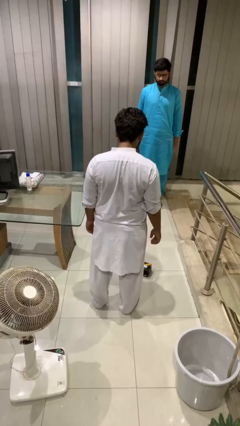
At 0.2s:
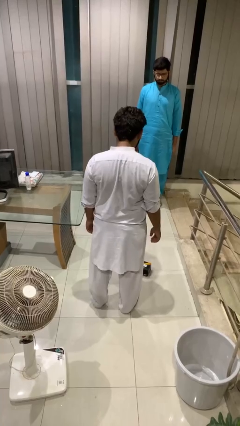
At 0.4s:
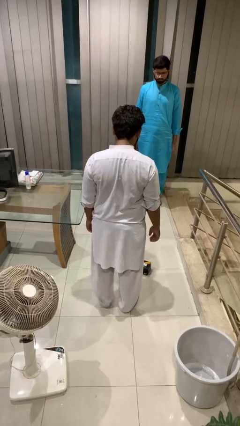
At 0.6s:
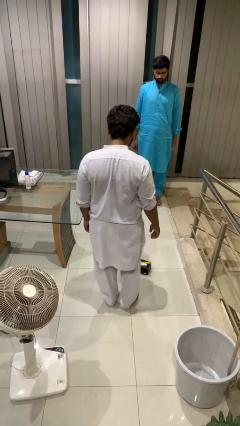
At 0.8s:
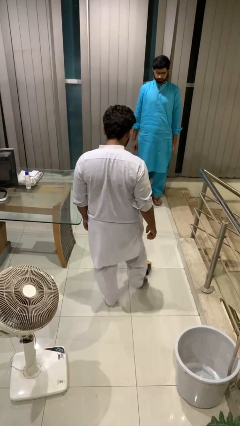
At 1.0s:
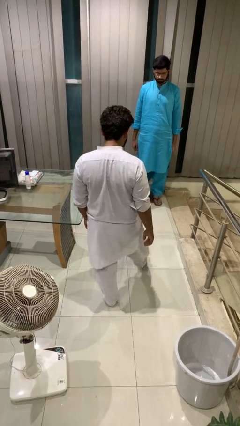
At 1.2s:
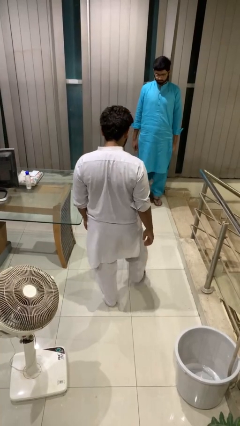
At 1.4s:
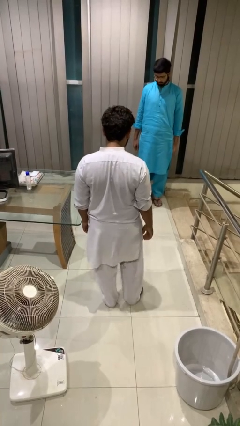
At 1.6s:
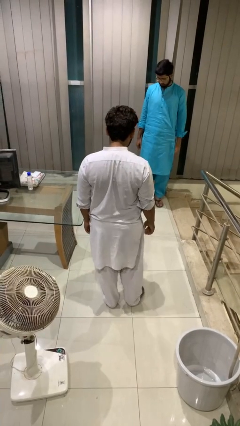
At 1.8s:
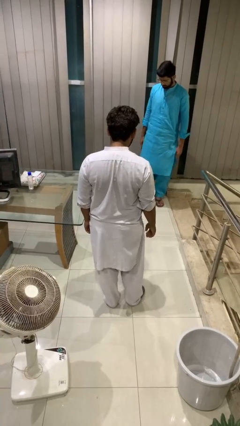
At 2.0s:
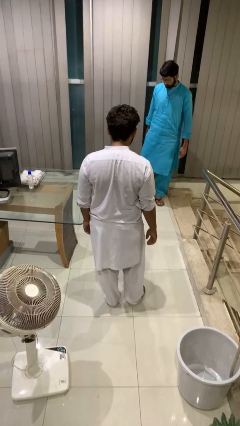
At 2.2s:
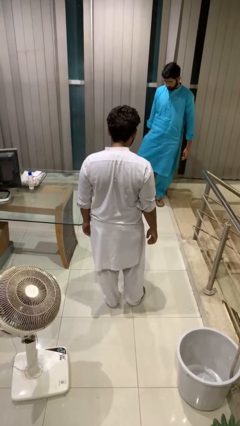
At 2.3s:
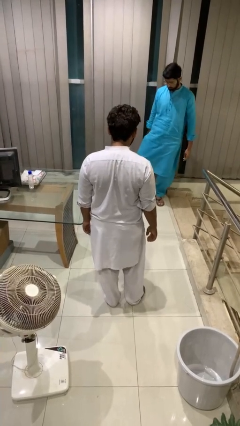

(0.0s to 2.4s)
person kicks object to person

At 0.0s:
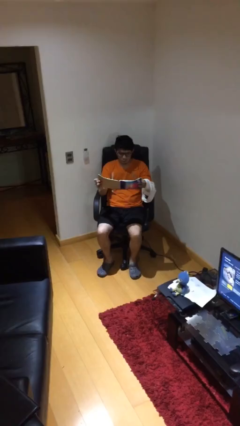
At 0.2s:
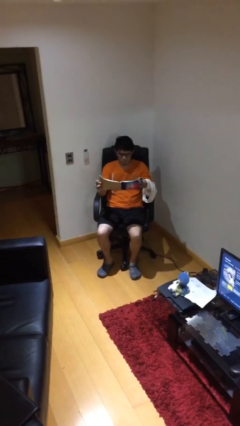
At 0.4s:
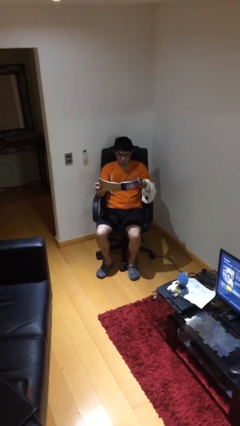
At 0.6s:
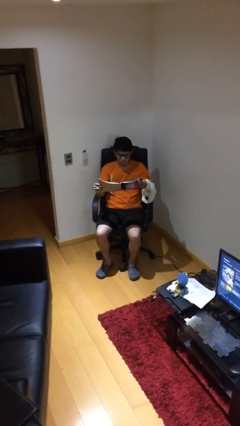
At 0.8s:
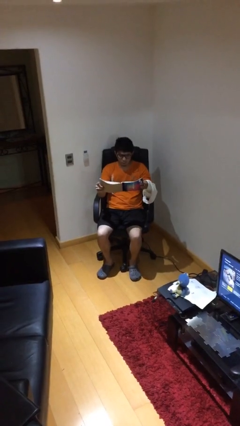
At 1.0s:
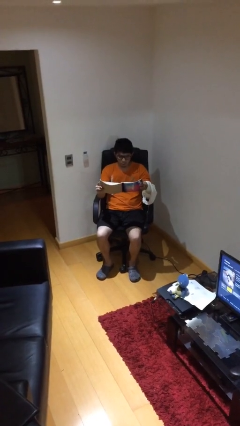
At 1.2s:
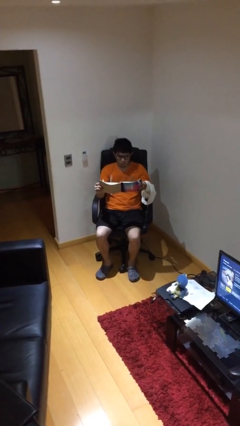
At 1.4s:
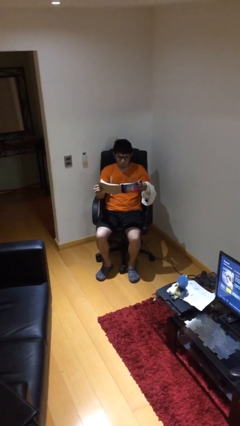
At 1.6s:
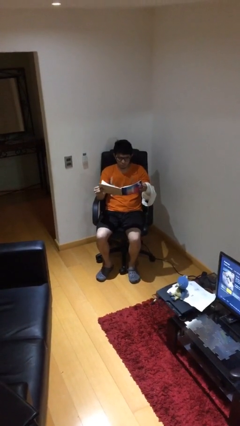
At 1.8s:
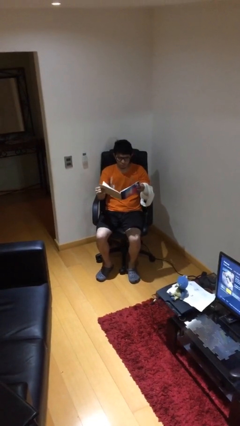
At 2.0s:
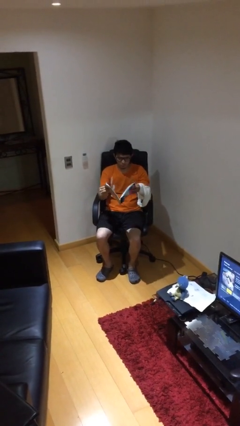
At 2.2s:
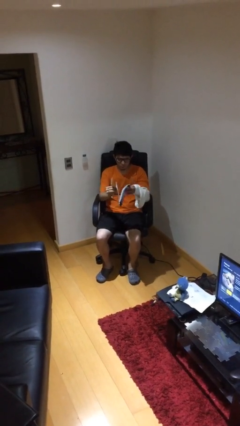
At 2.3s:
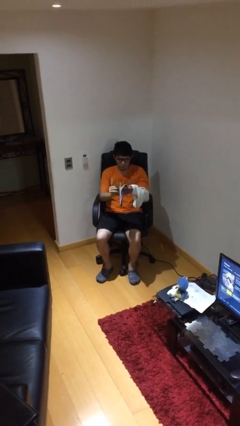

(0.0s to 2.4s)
person reads document

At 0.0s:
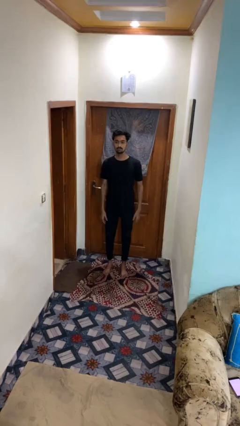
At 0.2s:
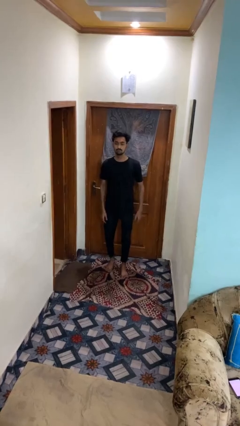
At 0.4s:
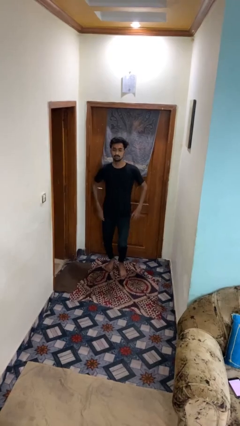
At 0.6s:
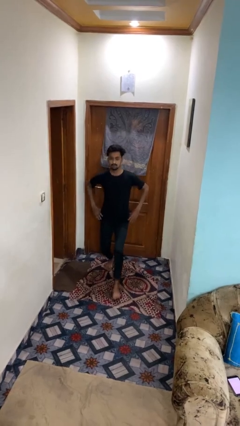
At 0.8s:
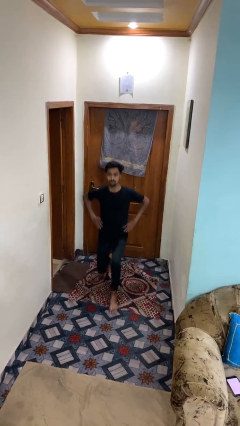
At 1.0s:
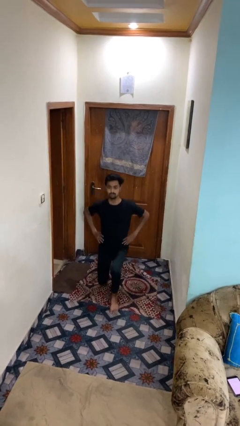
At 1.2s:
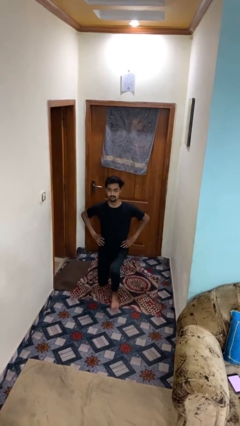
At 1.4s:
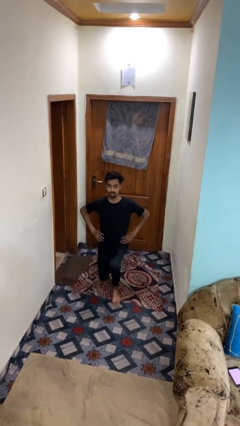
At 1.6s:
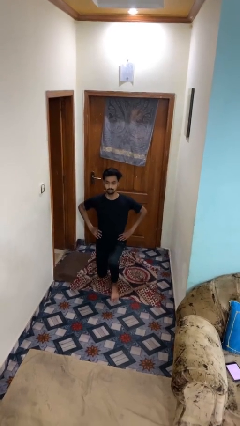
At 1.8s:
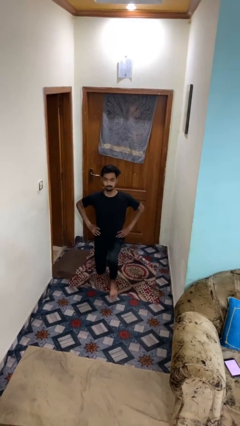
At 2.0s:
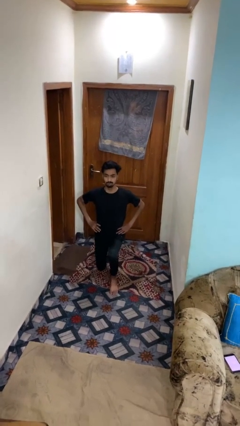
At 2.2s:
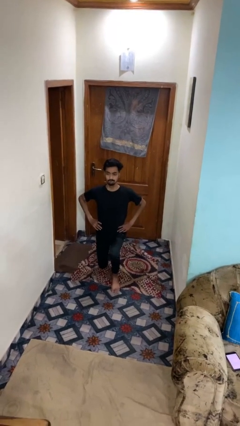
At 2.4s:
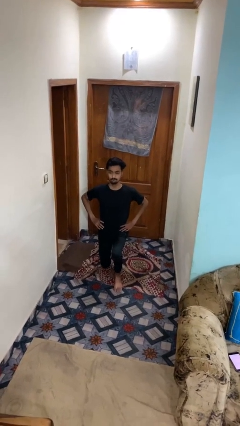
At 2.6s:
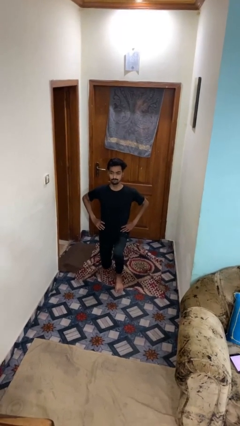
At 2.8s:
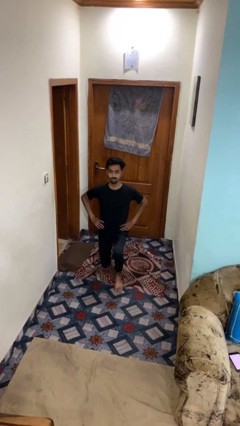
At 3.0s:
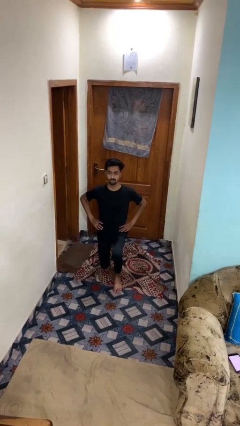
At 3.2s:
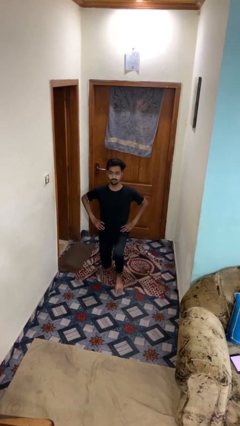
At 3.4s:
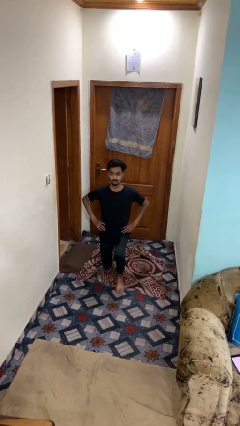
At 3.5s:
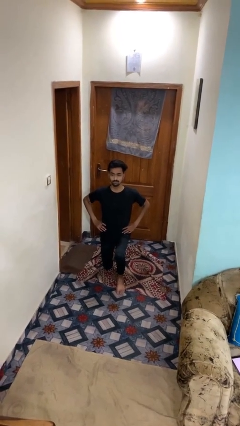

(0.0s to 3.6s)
person exercises with lunges

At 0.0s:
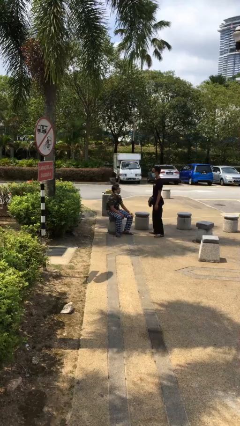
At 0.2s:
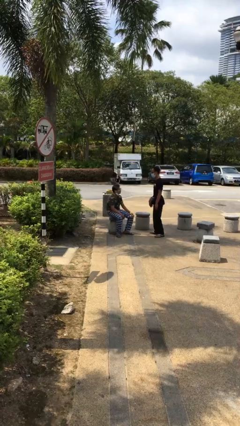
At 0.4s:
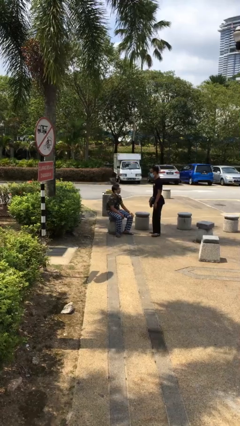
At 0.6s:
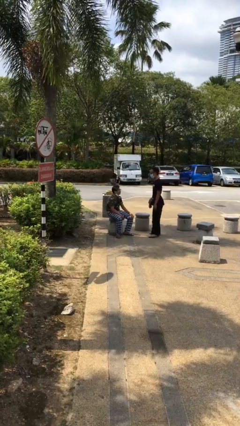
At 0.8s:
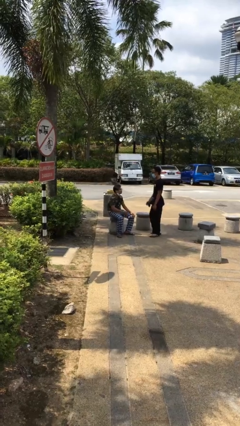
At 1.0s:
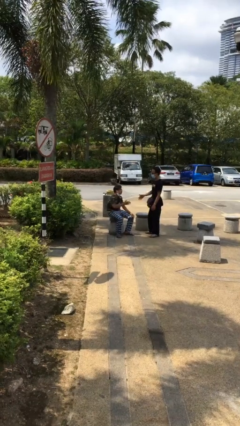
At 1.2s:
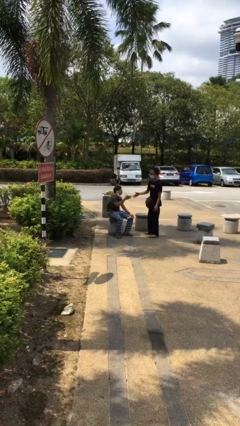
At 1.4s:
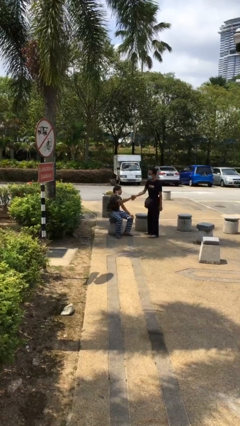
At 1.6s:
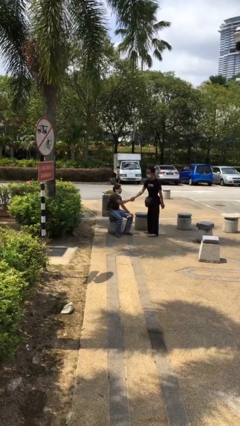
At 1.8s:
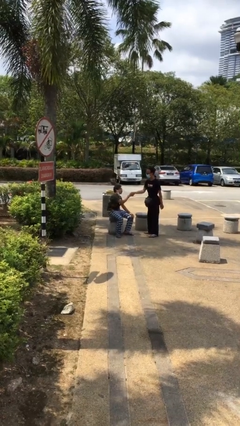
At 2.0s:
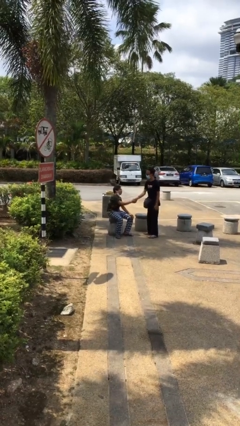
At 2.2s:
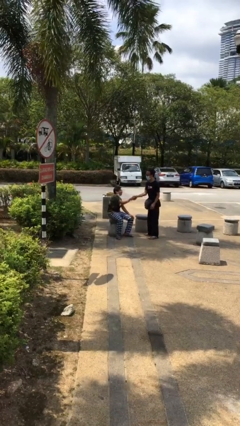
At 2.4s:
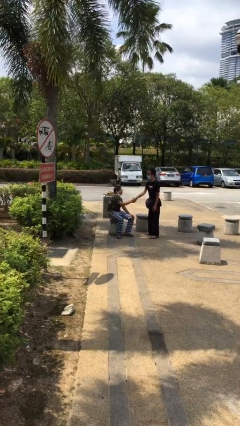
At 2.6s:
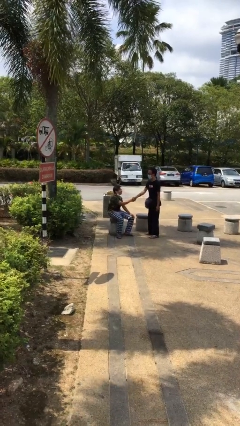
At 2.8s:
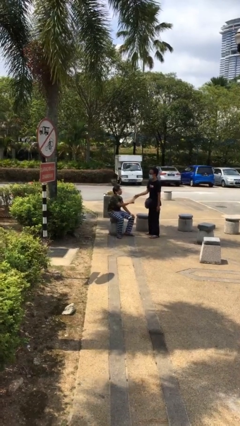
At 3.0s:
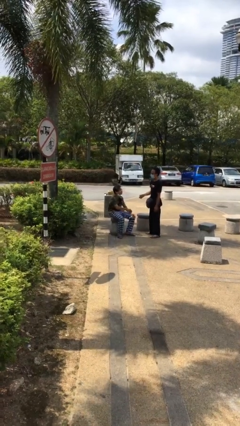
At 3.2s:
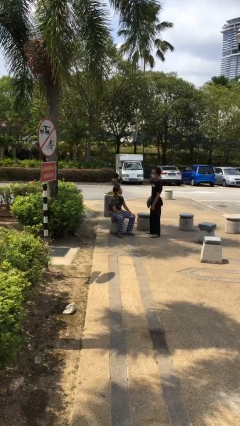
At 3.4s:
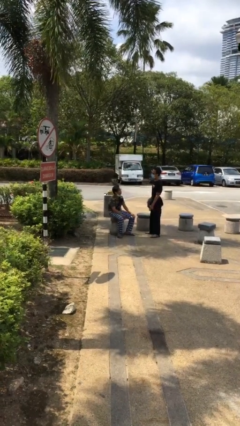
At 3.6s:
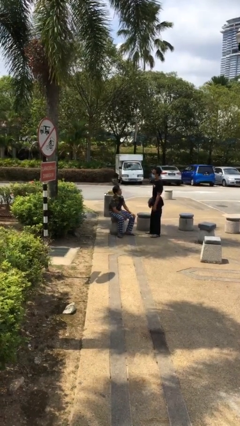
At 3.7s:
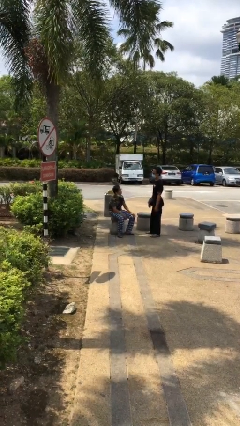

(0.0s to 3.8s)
person shakes hand

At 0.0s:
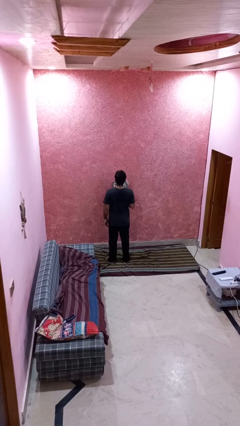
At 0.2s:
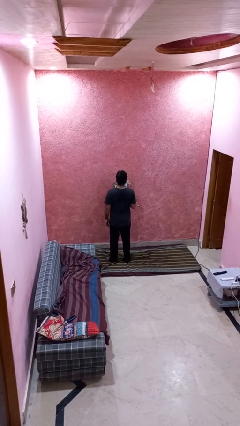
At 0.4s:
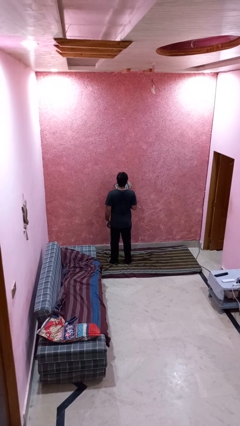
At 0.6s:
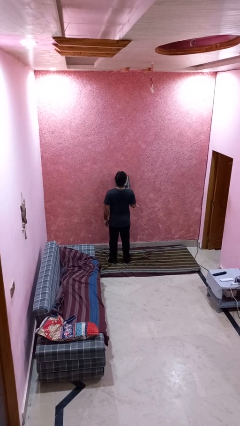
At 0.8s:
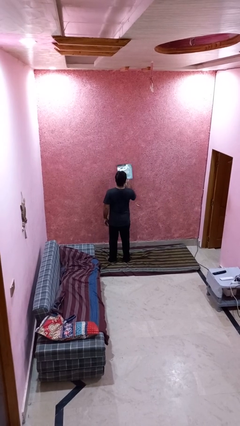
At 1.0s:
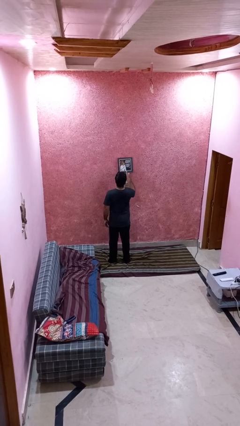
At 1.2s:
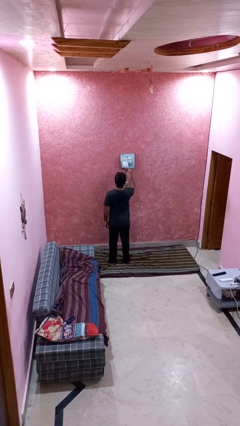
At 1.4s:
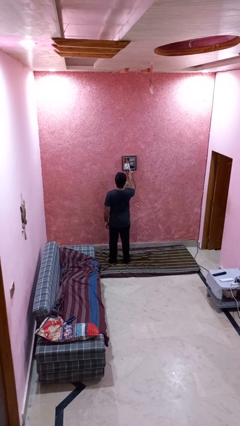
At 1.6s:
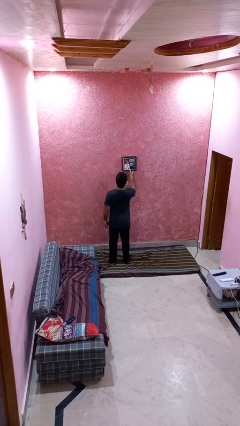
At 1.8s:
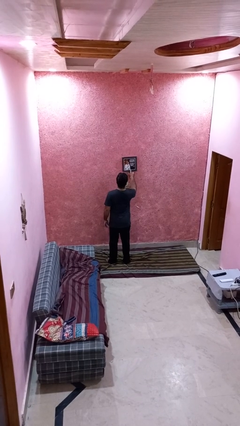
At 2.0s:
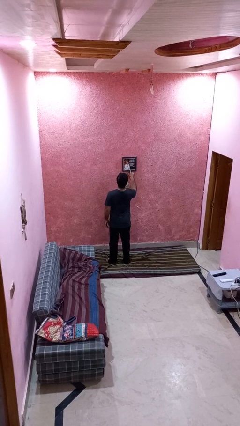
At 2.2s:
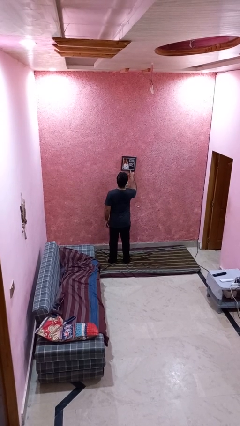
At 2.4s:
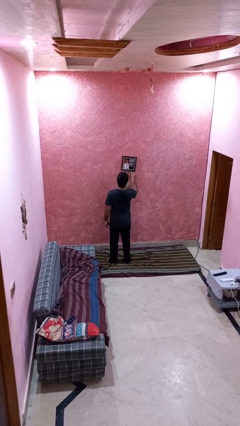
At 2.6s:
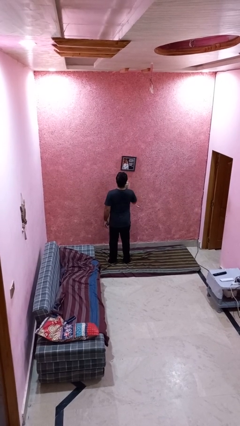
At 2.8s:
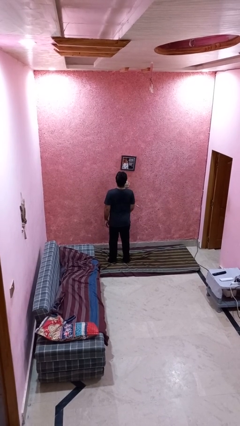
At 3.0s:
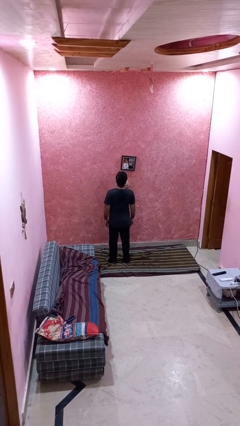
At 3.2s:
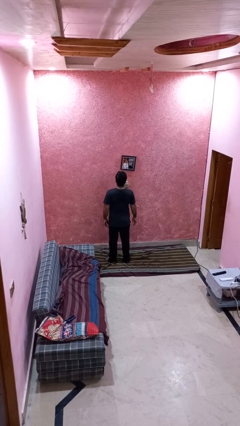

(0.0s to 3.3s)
person puts up picture frame

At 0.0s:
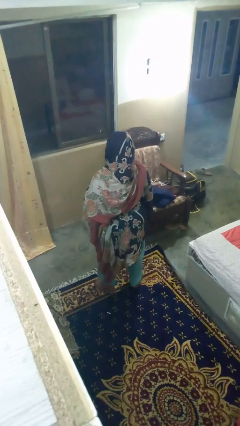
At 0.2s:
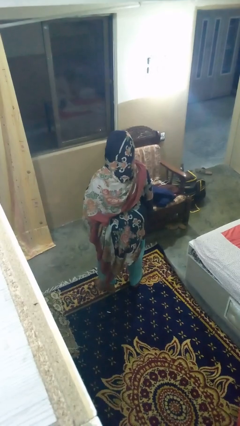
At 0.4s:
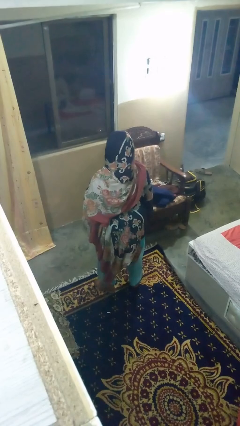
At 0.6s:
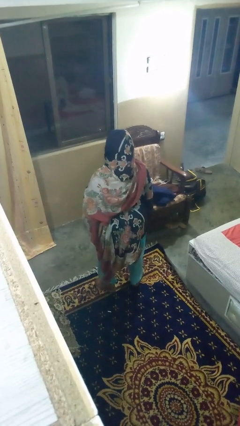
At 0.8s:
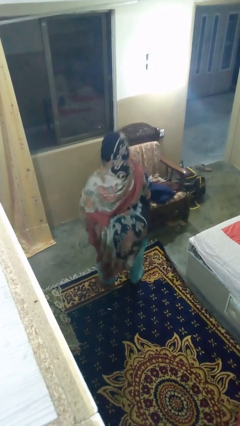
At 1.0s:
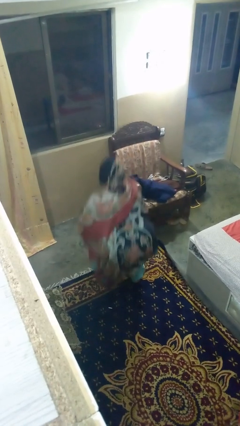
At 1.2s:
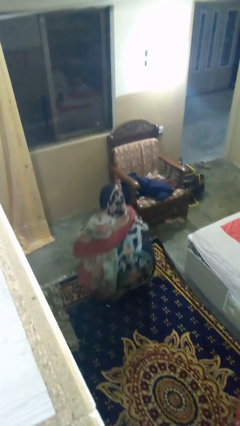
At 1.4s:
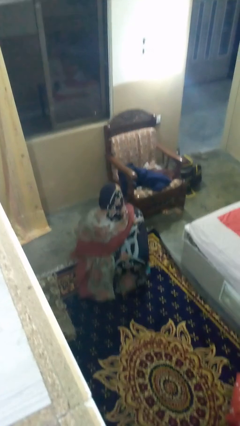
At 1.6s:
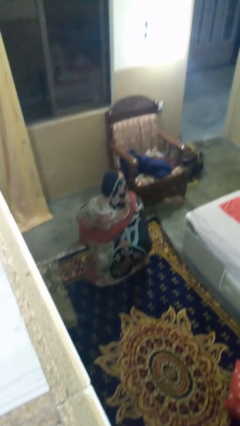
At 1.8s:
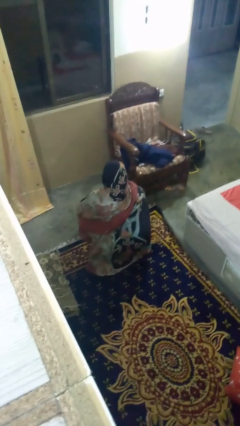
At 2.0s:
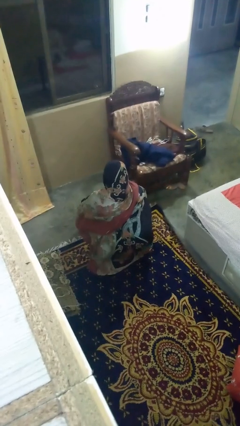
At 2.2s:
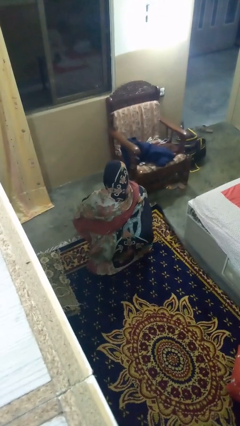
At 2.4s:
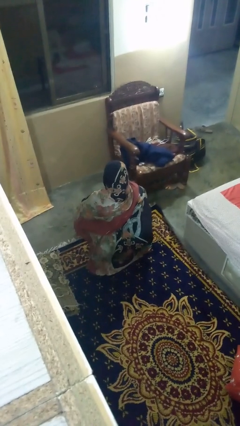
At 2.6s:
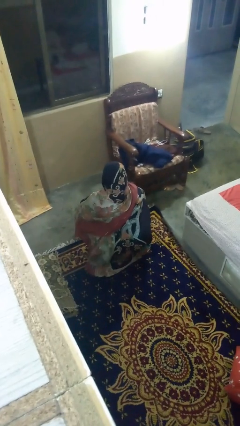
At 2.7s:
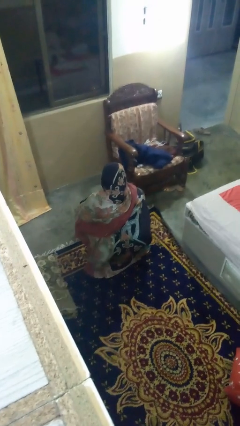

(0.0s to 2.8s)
person squats
